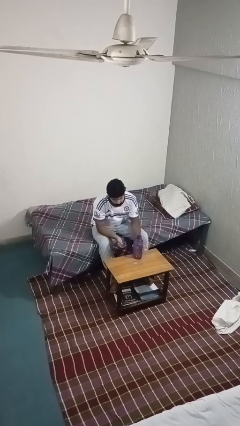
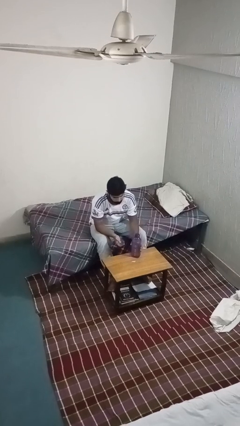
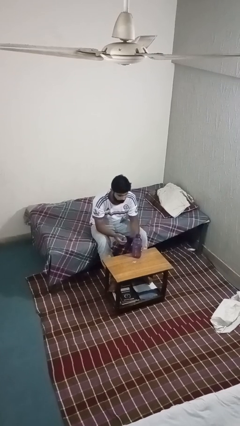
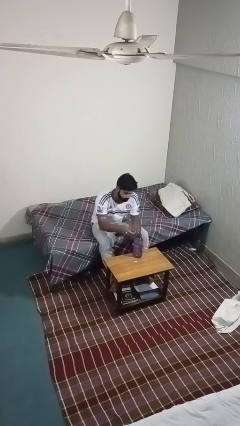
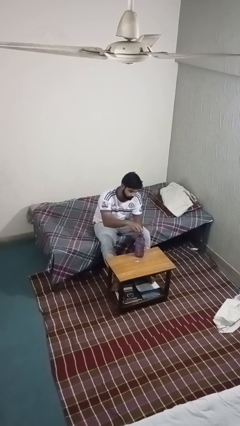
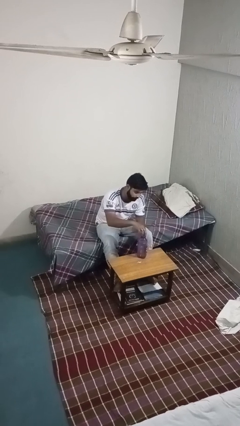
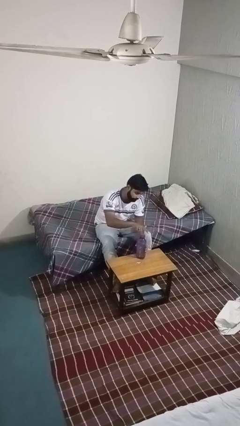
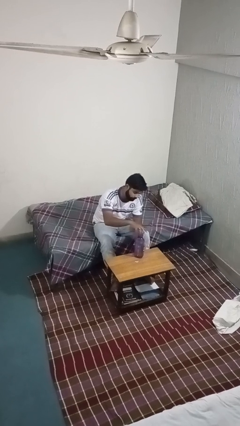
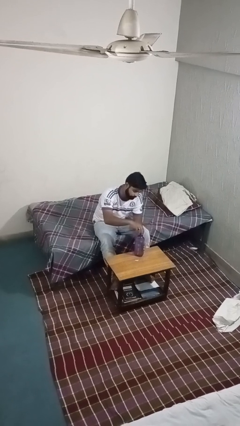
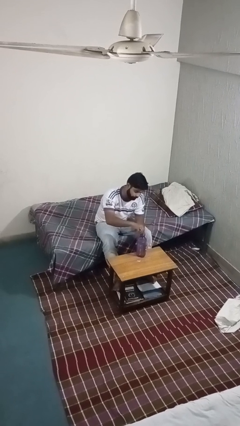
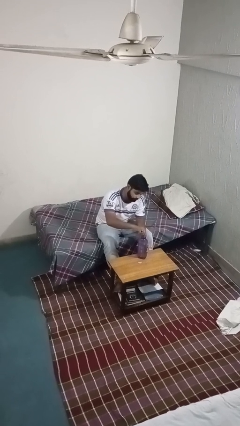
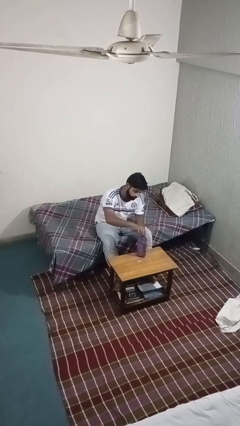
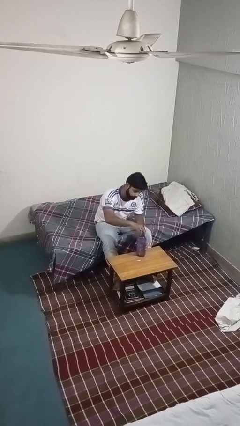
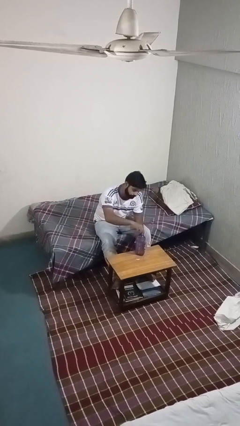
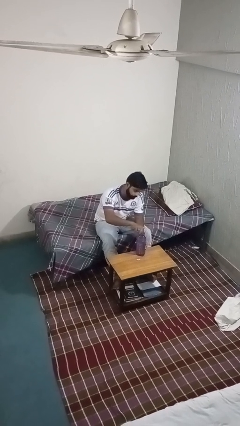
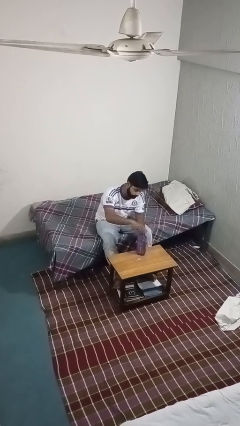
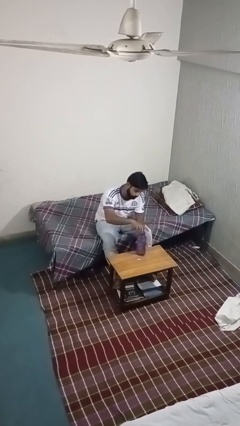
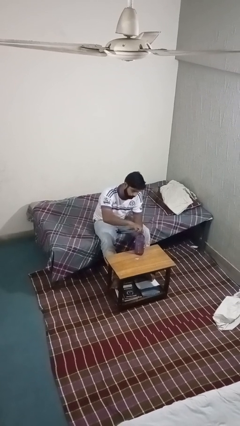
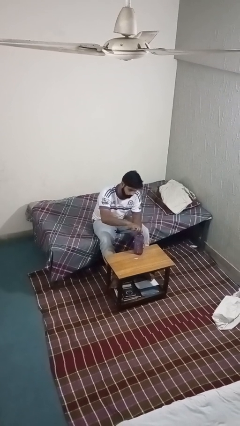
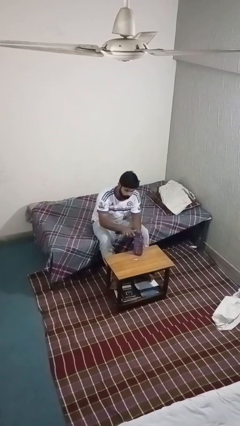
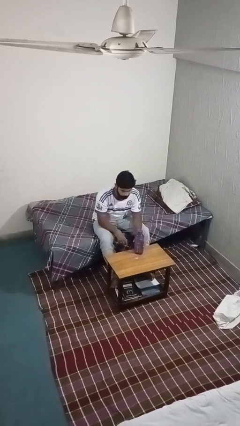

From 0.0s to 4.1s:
person screws lid to bottle

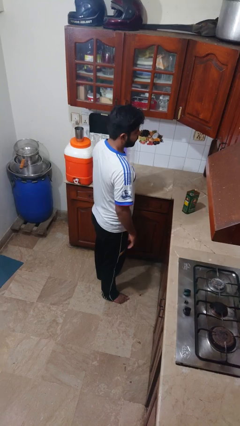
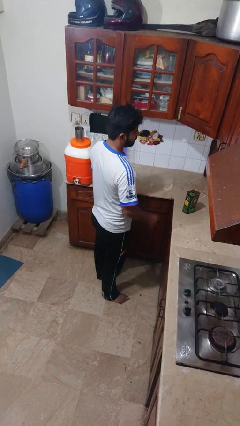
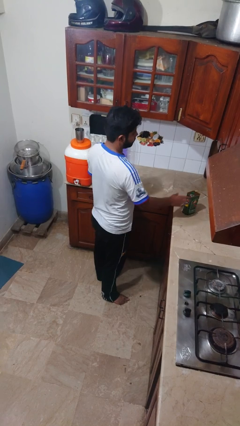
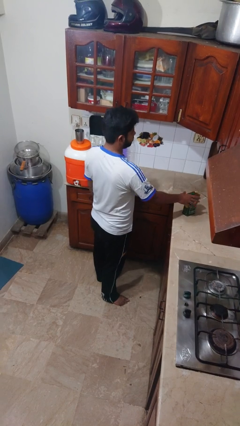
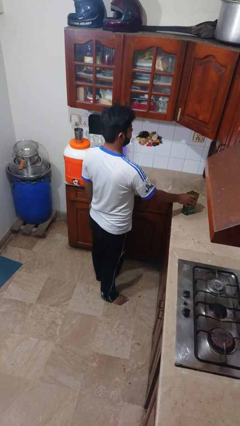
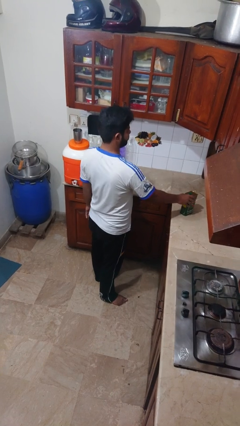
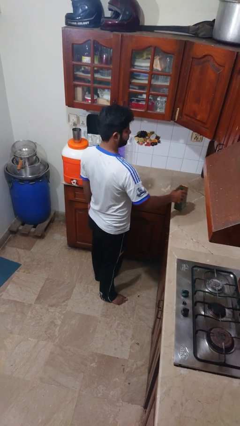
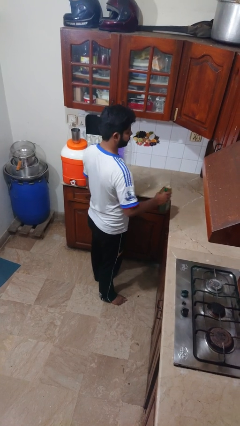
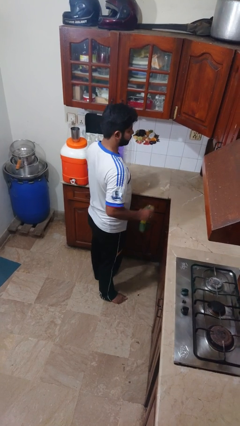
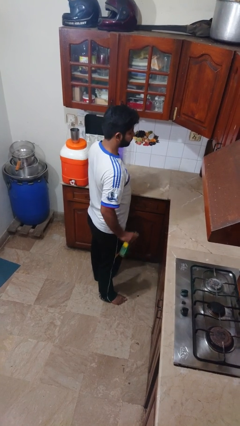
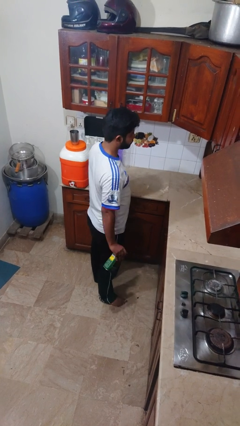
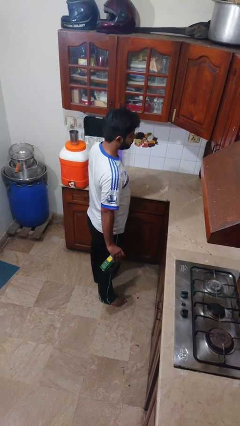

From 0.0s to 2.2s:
person picks up object from countertop

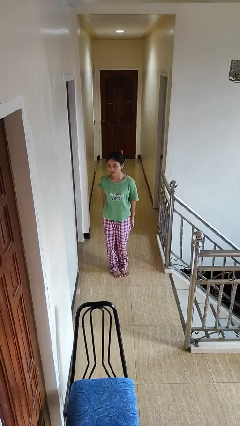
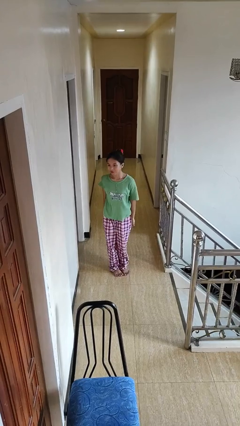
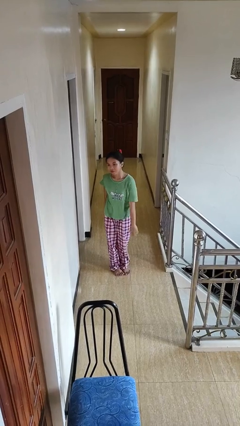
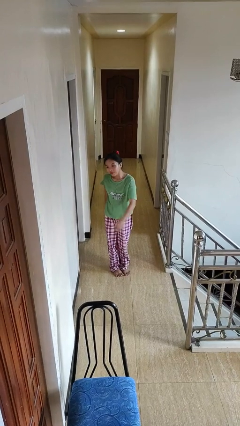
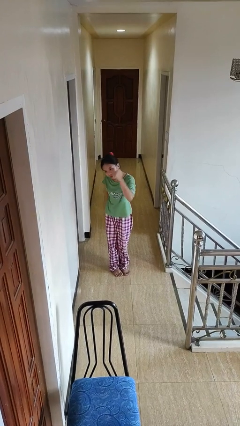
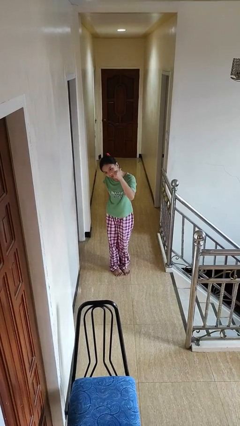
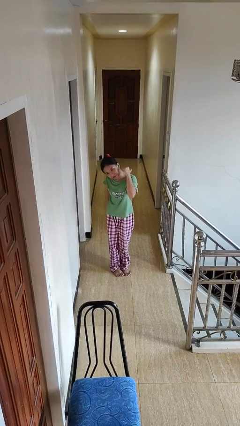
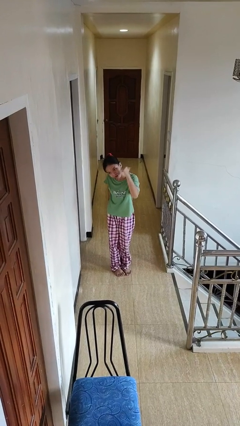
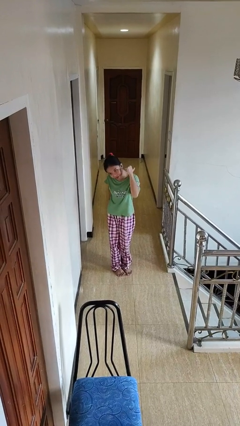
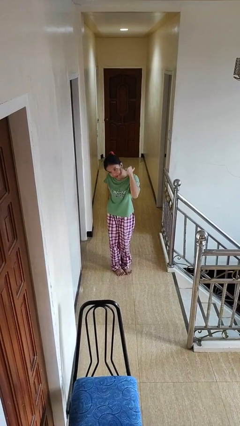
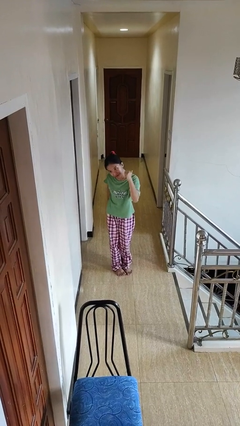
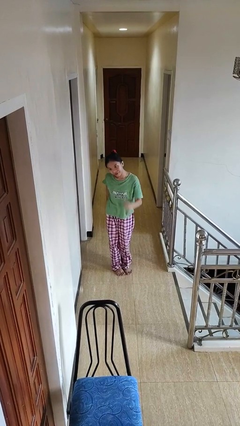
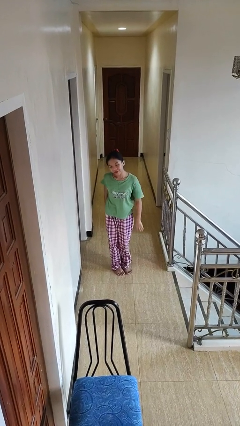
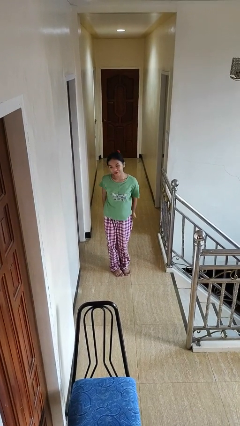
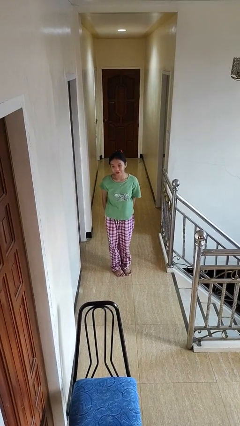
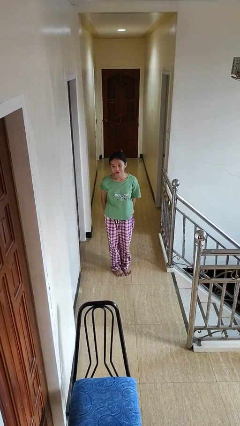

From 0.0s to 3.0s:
person gestures behind me

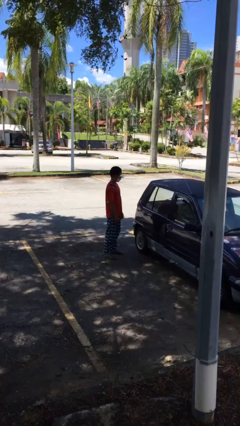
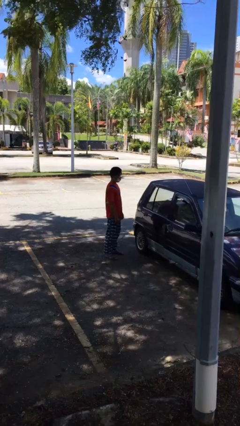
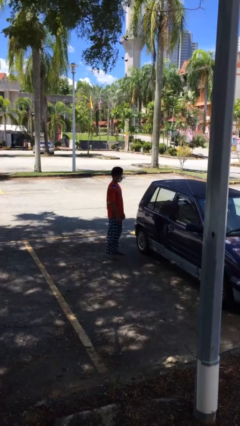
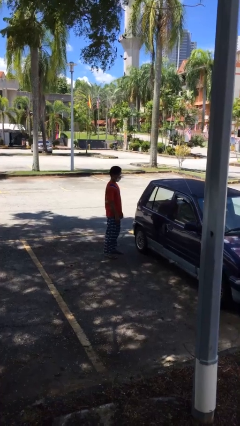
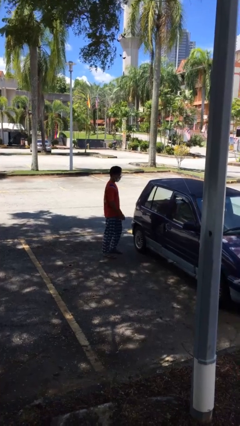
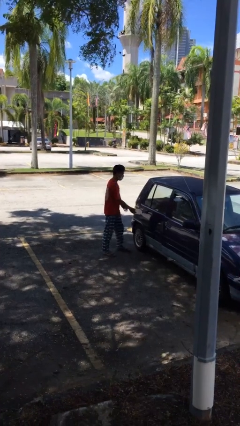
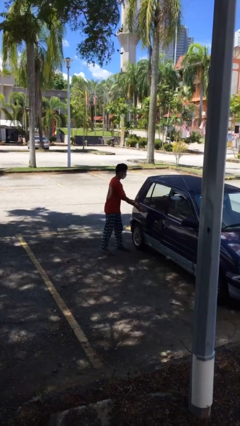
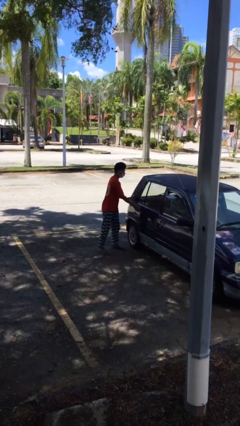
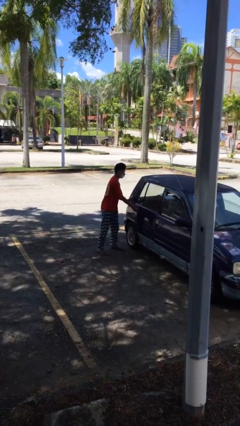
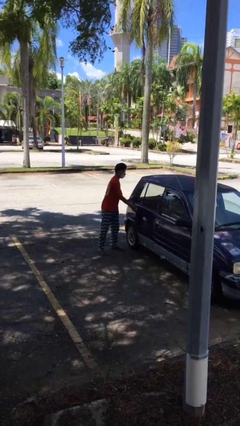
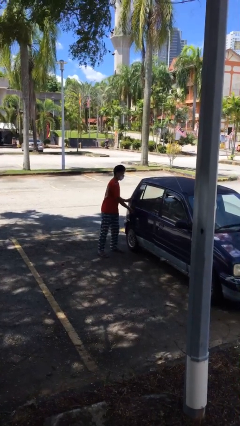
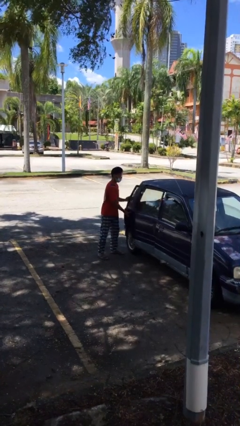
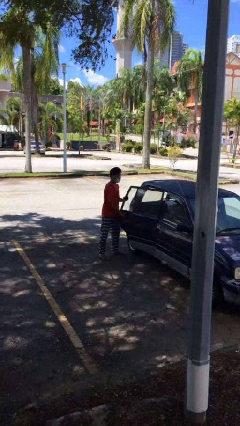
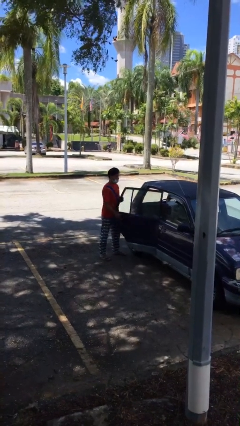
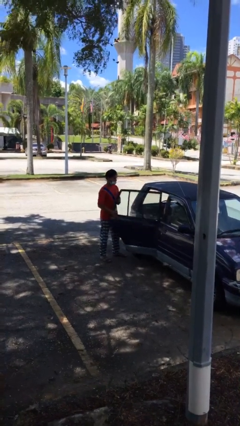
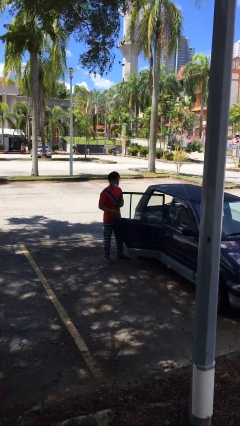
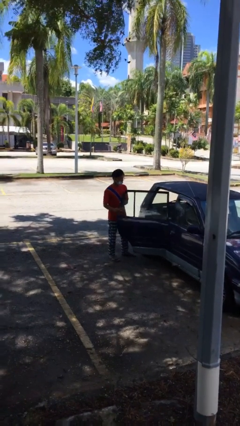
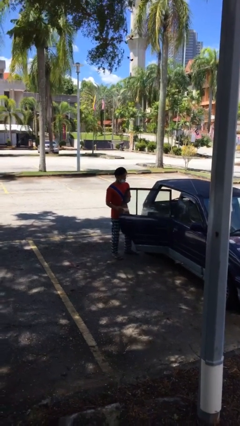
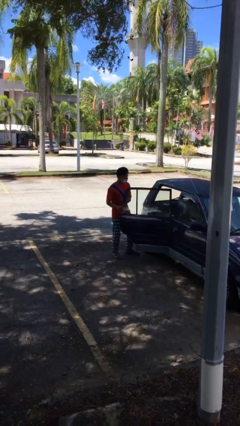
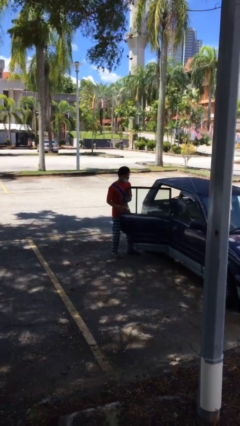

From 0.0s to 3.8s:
person opens car door

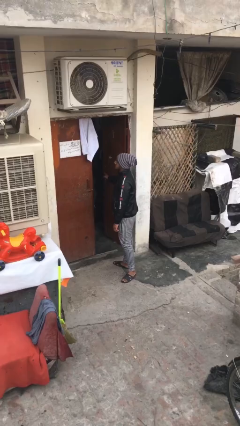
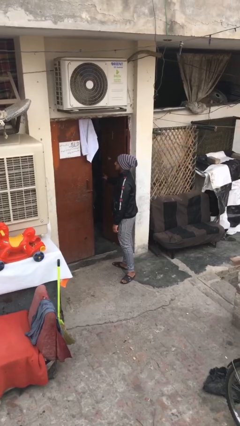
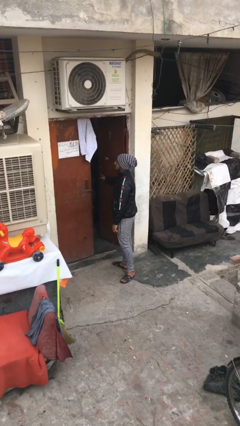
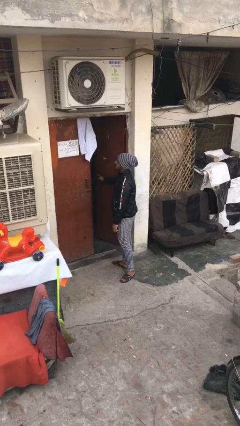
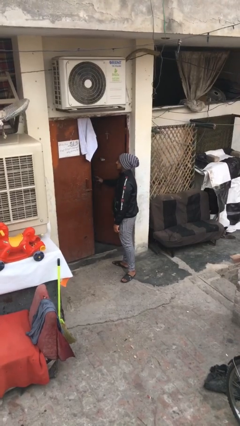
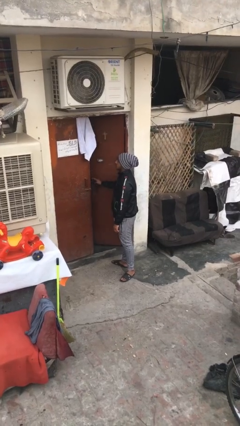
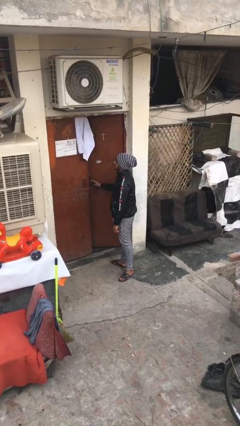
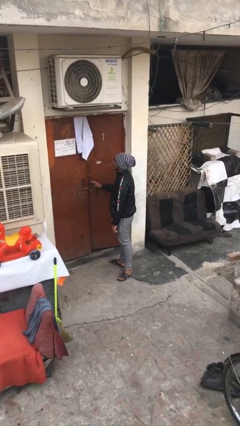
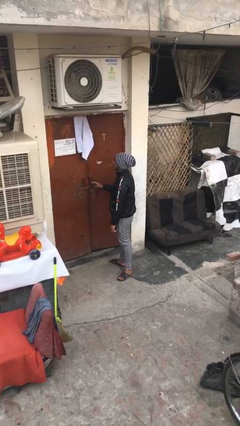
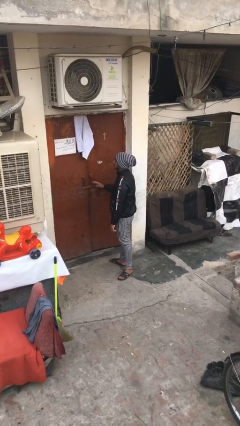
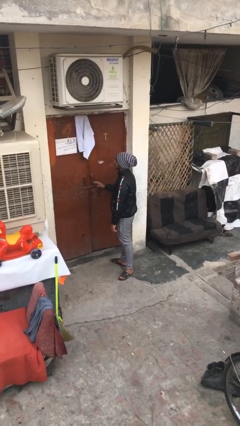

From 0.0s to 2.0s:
person closes facility door

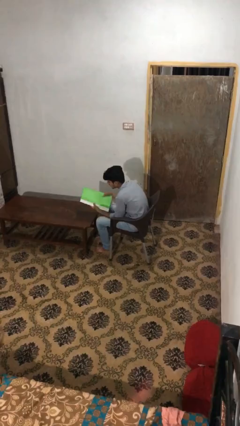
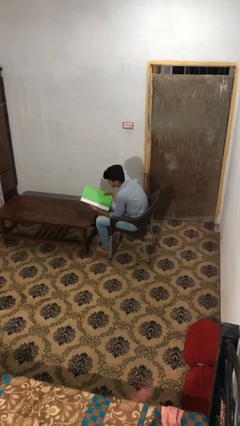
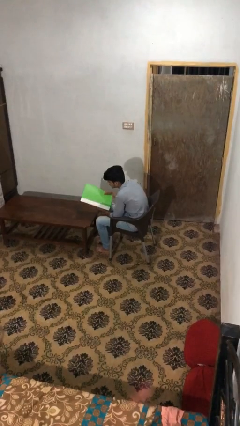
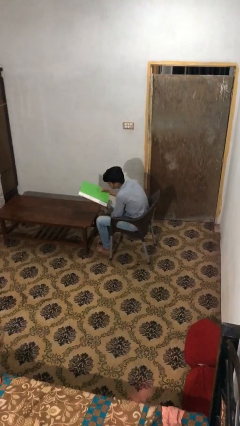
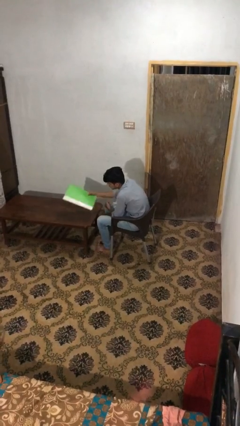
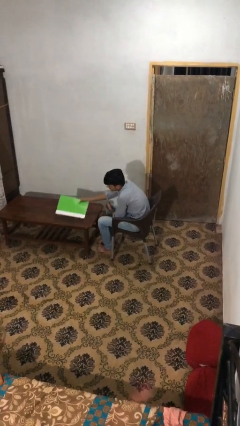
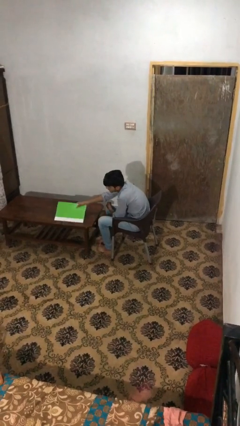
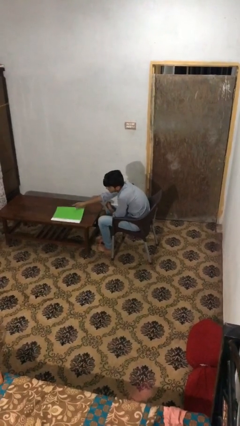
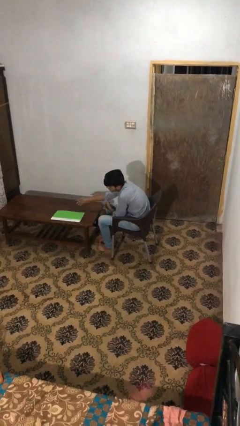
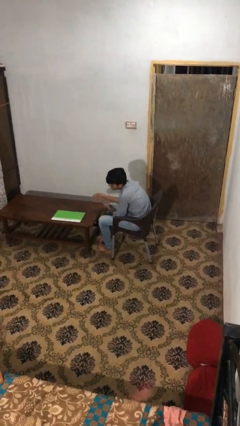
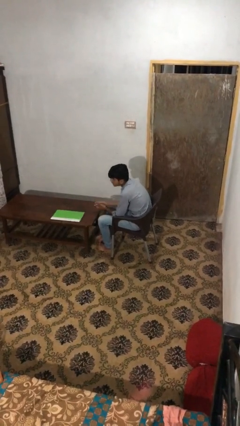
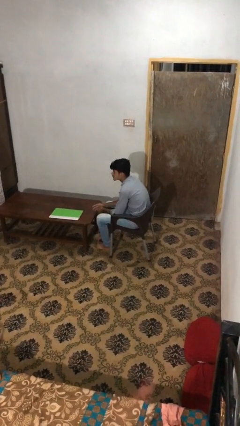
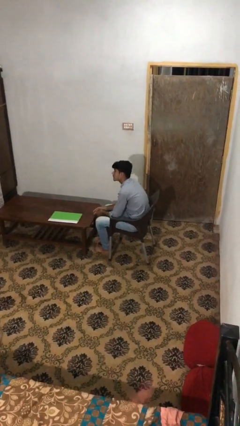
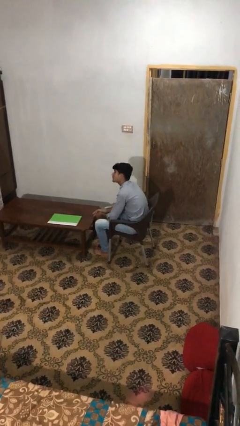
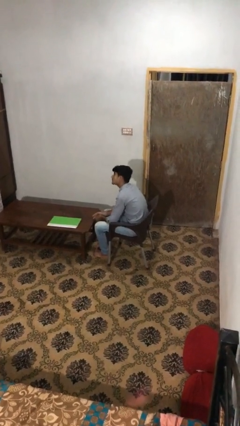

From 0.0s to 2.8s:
person puts down object on table
